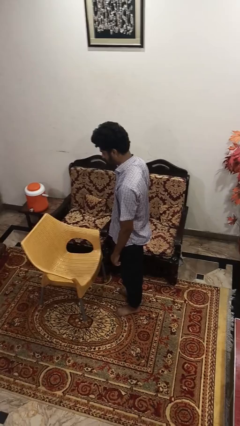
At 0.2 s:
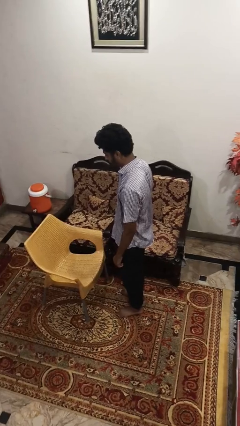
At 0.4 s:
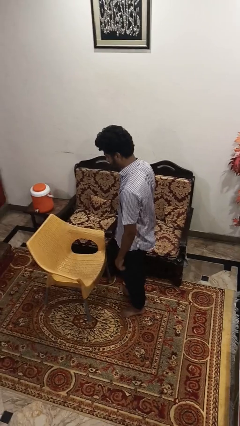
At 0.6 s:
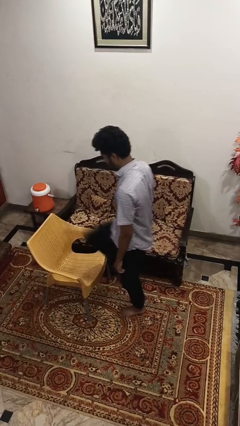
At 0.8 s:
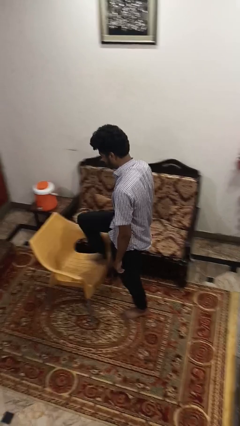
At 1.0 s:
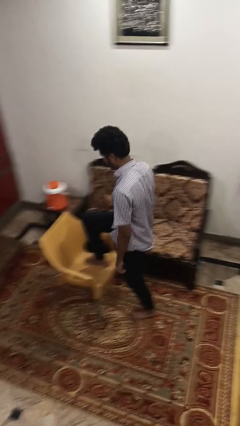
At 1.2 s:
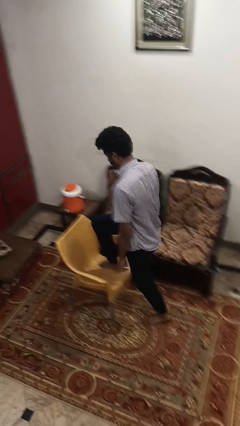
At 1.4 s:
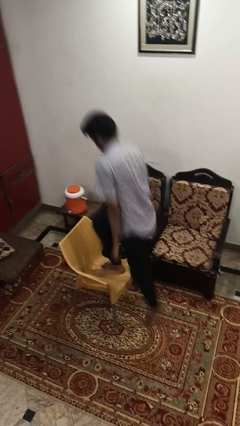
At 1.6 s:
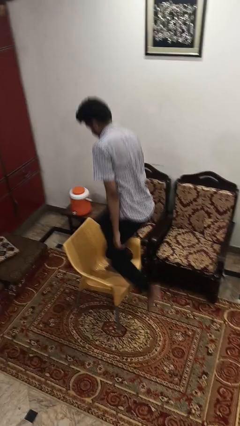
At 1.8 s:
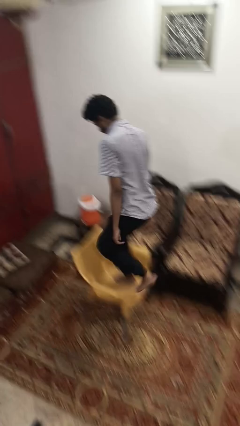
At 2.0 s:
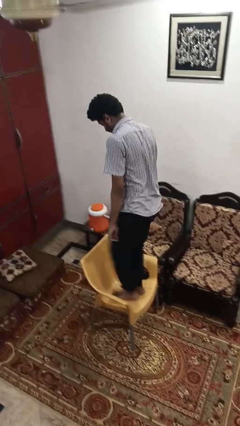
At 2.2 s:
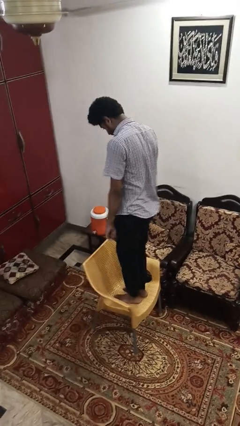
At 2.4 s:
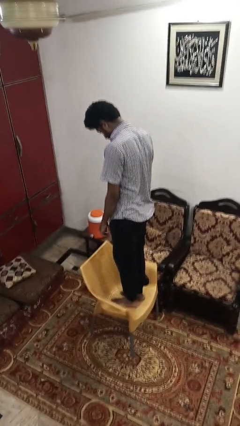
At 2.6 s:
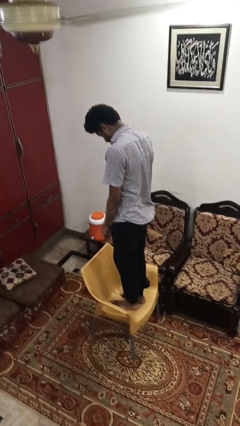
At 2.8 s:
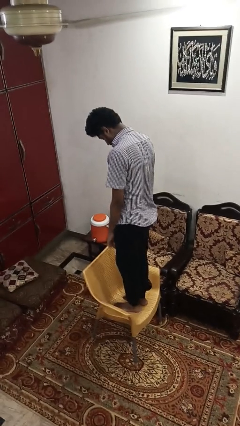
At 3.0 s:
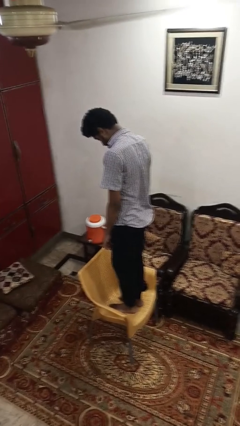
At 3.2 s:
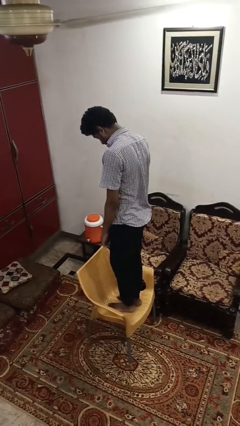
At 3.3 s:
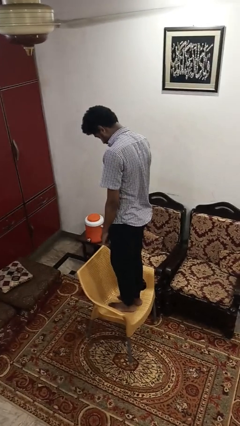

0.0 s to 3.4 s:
person climbs on chair

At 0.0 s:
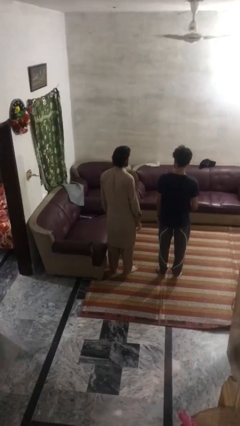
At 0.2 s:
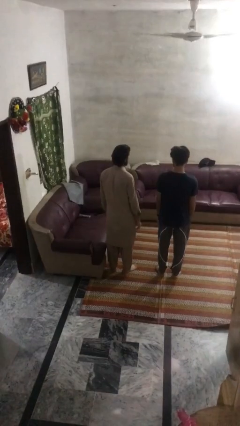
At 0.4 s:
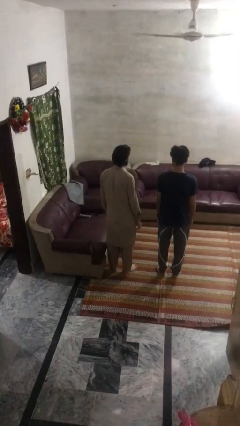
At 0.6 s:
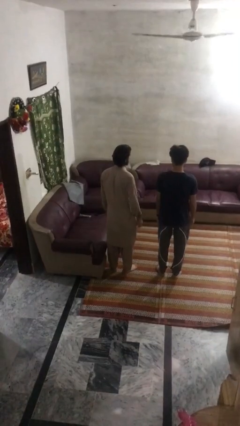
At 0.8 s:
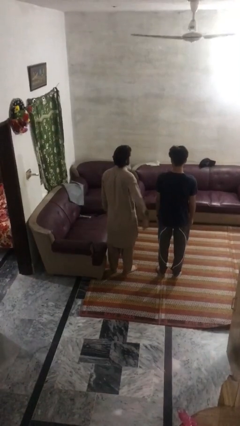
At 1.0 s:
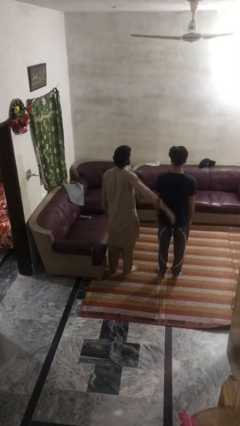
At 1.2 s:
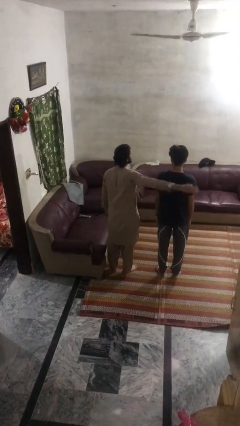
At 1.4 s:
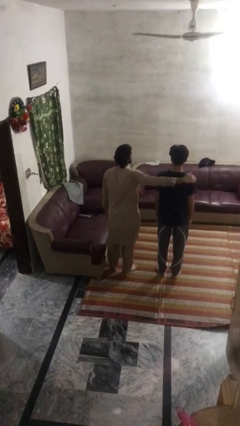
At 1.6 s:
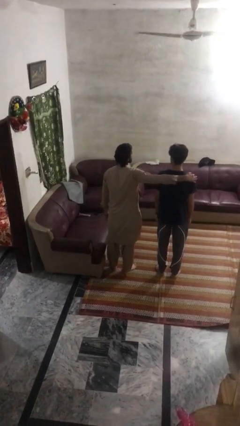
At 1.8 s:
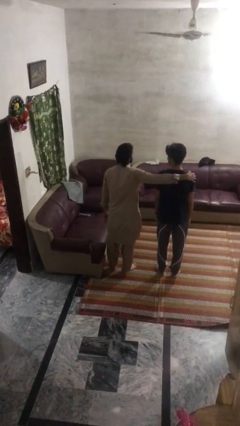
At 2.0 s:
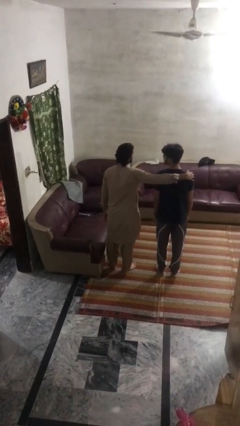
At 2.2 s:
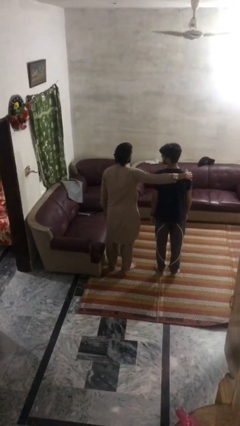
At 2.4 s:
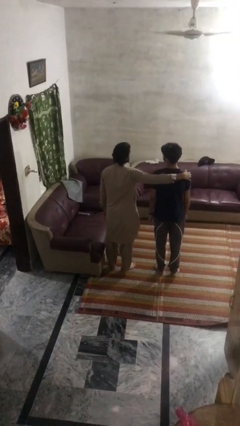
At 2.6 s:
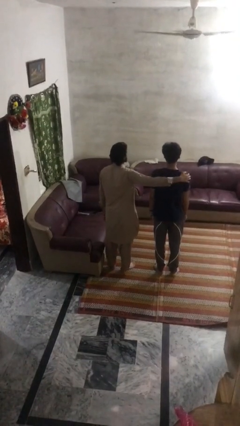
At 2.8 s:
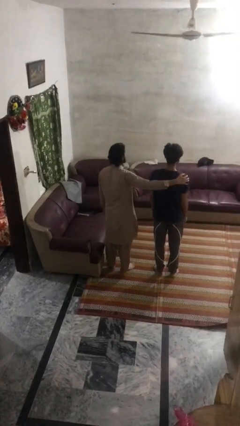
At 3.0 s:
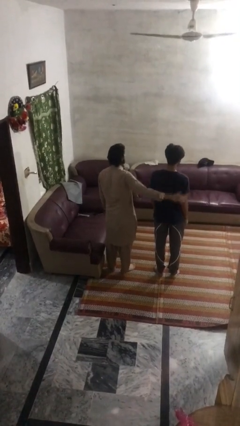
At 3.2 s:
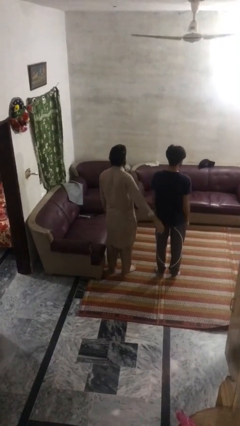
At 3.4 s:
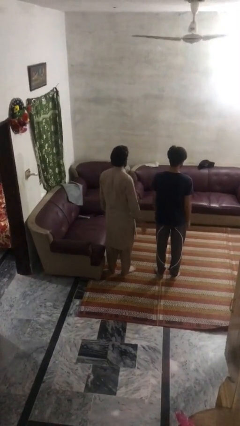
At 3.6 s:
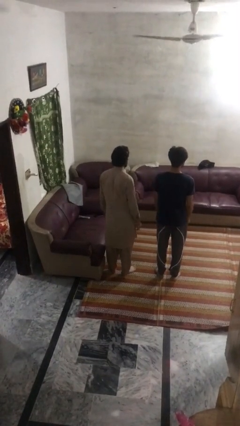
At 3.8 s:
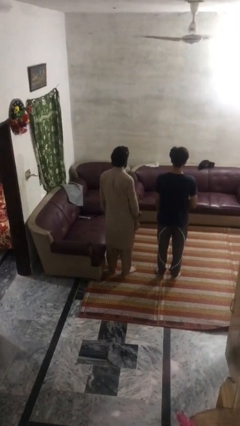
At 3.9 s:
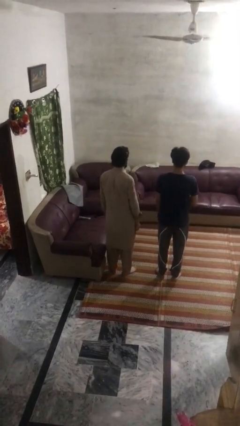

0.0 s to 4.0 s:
person pounds shoulders of person

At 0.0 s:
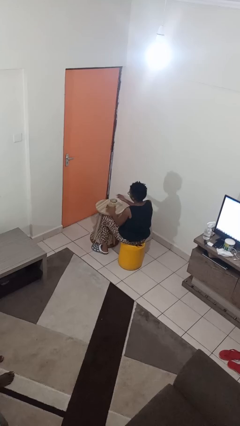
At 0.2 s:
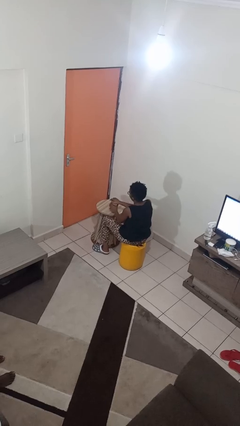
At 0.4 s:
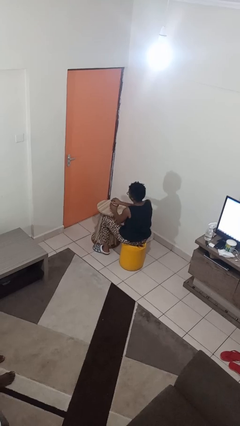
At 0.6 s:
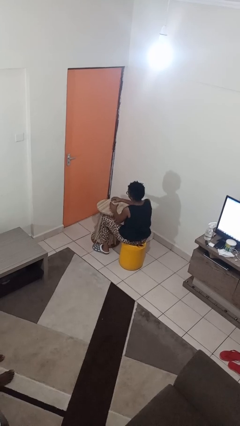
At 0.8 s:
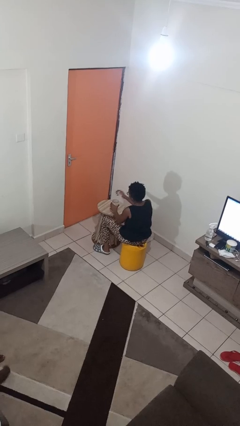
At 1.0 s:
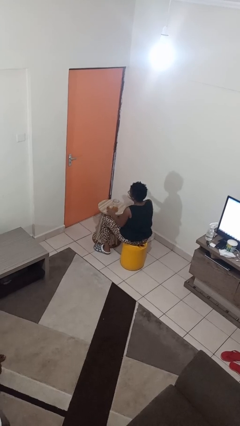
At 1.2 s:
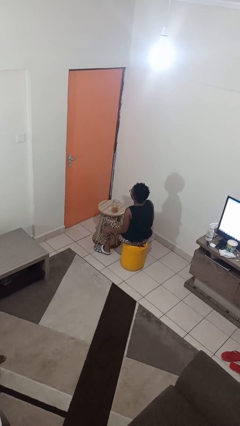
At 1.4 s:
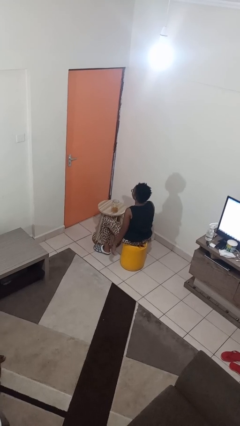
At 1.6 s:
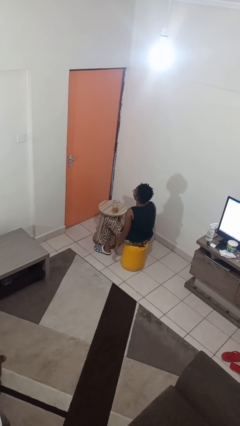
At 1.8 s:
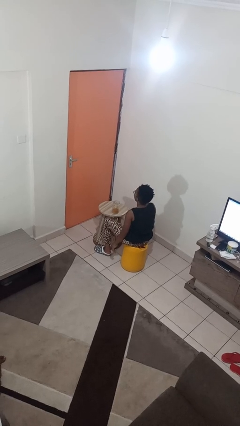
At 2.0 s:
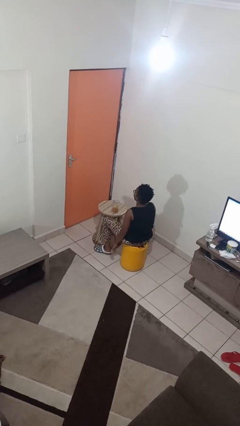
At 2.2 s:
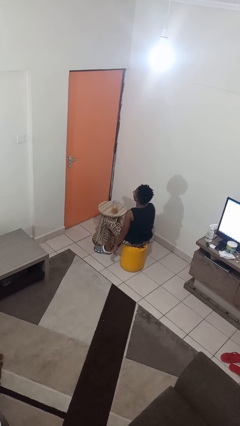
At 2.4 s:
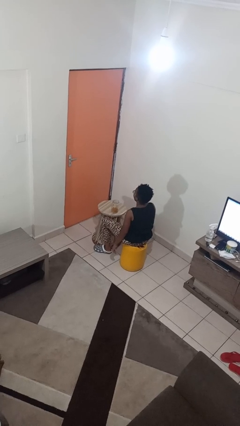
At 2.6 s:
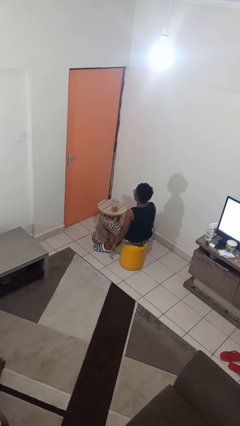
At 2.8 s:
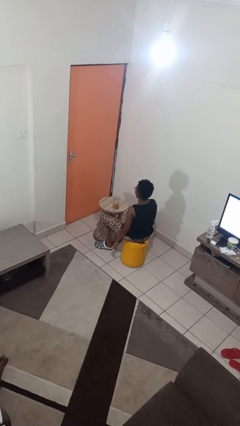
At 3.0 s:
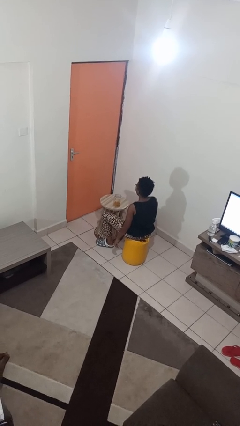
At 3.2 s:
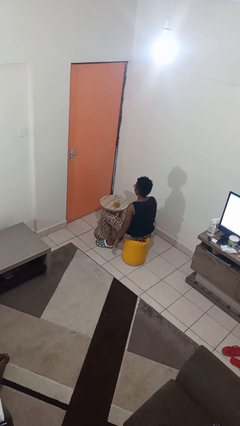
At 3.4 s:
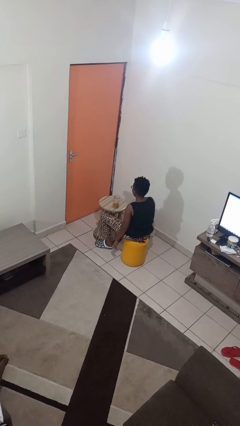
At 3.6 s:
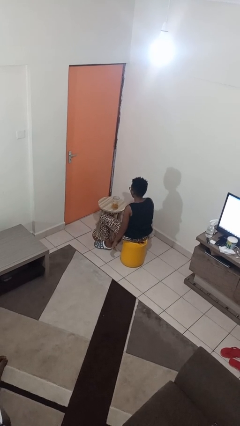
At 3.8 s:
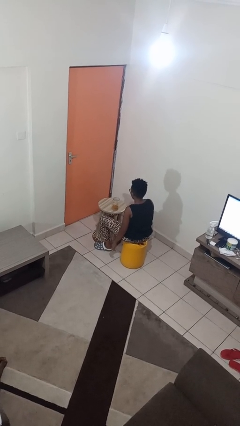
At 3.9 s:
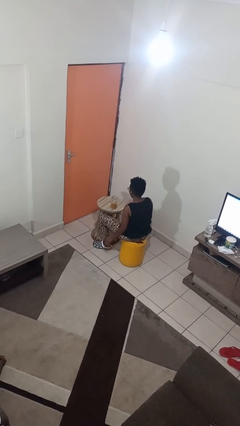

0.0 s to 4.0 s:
person opens jar

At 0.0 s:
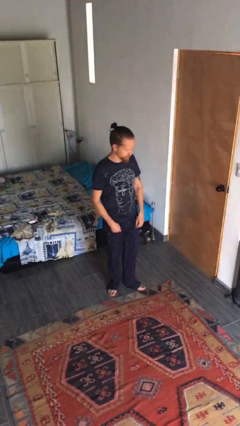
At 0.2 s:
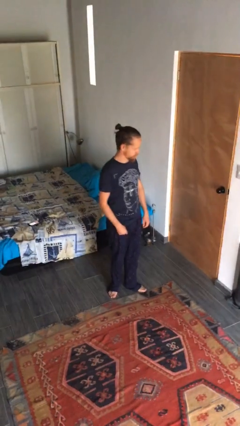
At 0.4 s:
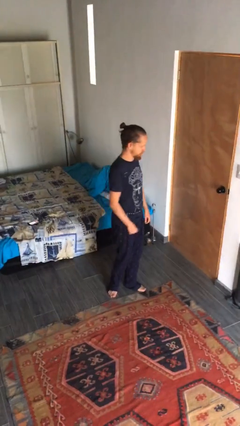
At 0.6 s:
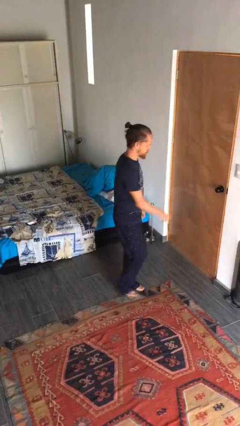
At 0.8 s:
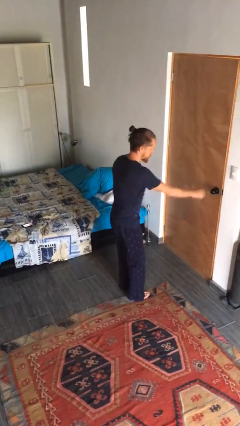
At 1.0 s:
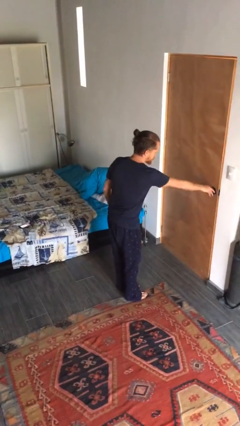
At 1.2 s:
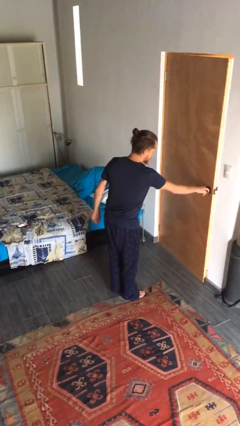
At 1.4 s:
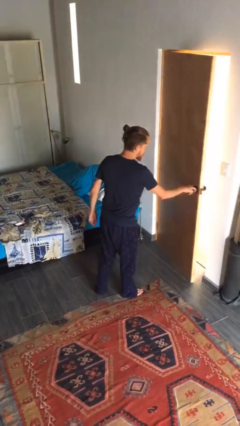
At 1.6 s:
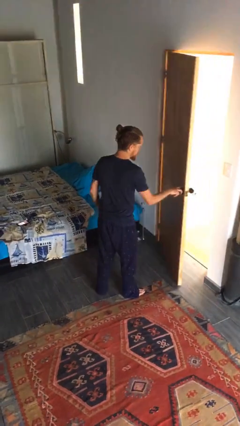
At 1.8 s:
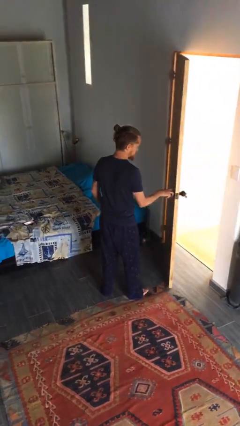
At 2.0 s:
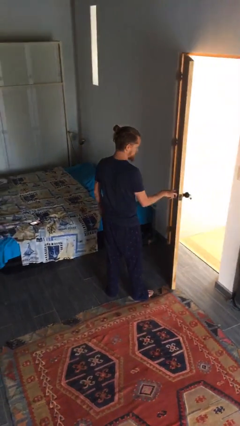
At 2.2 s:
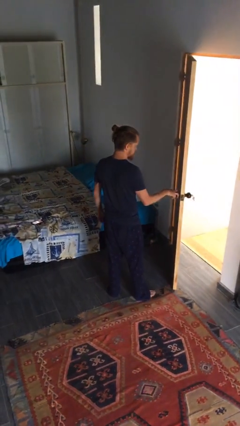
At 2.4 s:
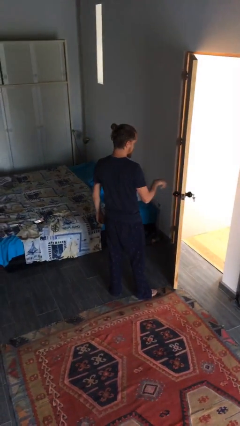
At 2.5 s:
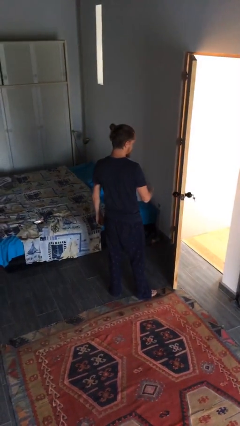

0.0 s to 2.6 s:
person opens facility door

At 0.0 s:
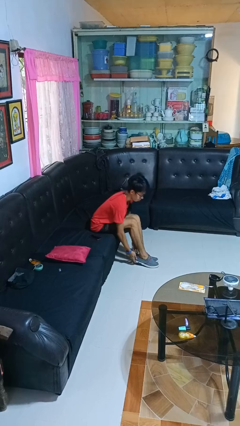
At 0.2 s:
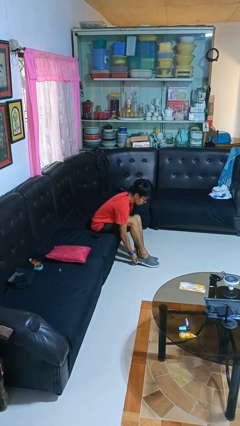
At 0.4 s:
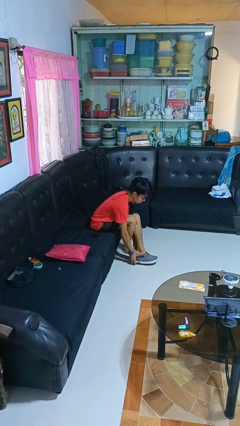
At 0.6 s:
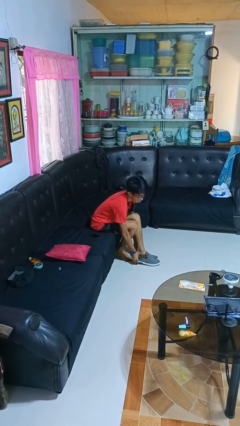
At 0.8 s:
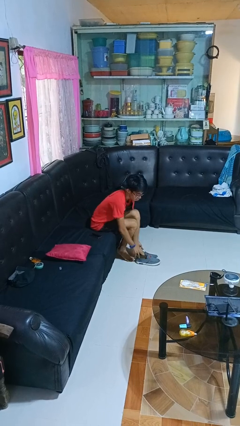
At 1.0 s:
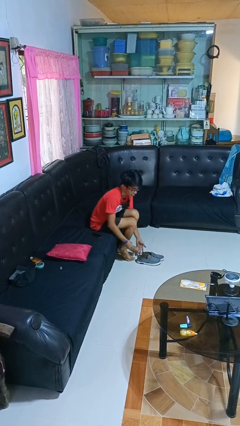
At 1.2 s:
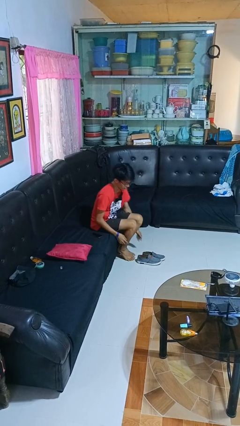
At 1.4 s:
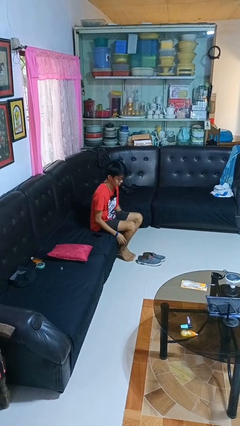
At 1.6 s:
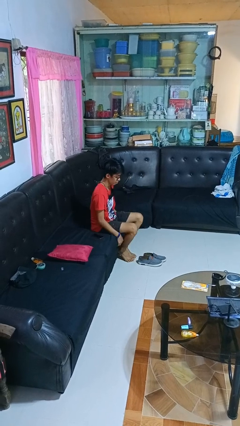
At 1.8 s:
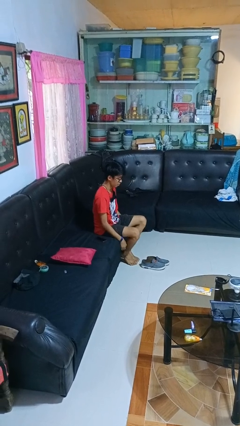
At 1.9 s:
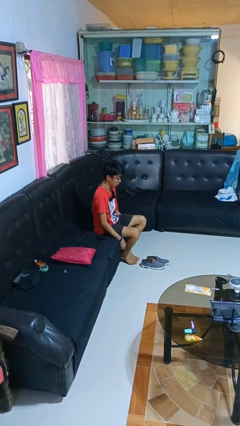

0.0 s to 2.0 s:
person takes off shoes

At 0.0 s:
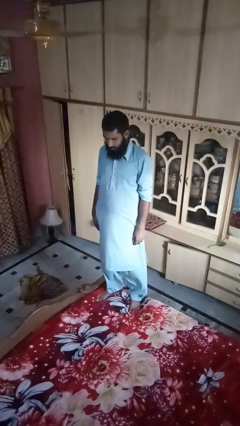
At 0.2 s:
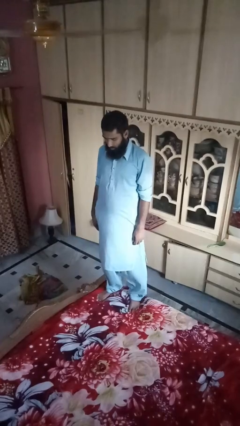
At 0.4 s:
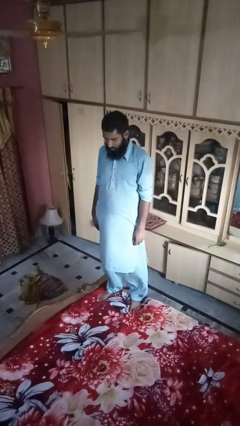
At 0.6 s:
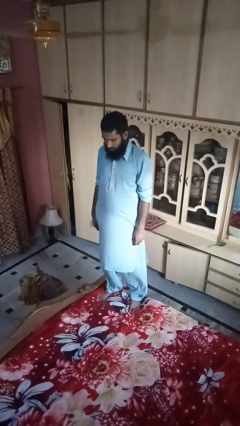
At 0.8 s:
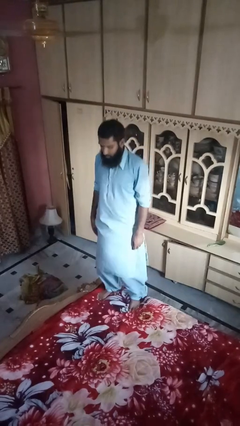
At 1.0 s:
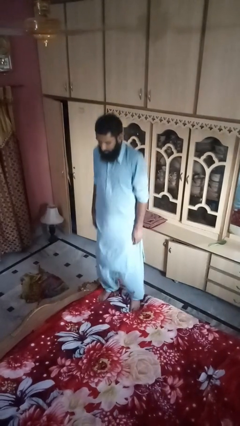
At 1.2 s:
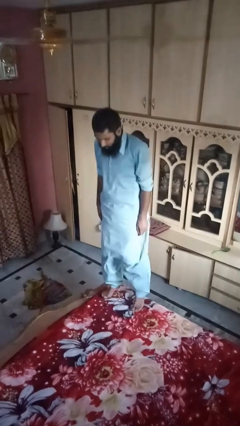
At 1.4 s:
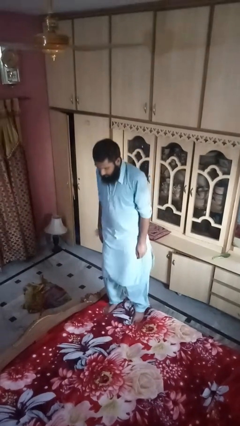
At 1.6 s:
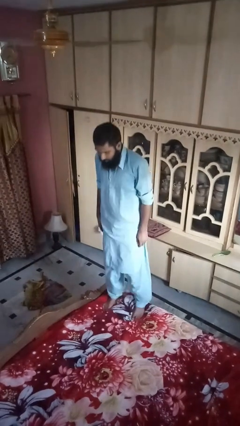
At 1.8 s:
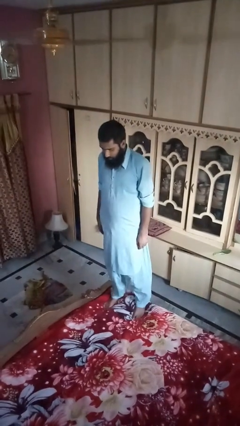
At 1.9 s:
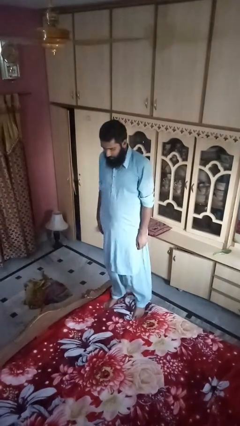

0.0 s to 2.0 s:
person jumps on bed
